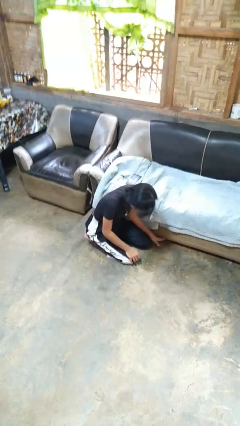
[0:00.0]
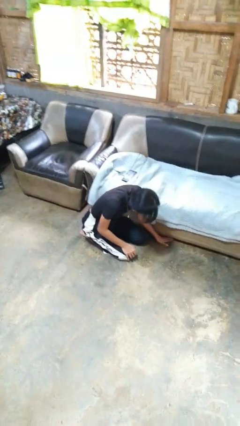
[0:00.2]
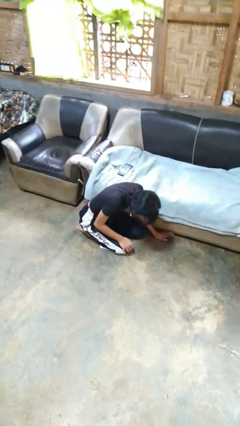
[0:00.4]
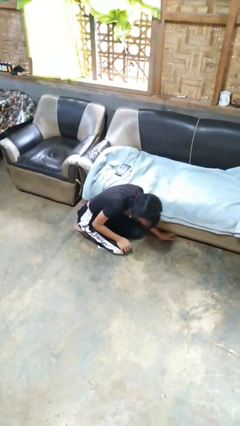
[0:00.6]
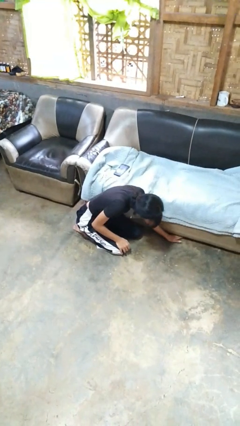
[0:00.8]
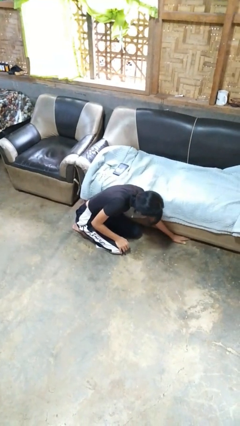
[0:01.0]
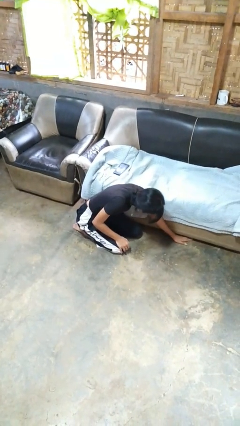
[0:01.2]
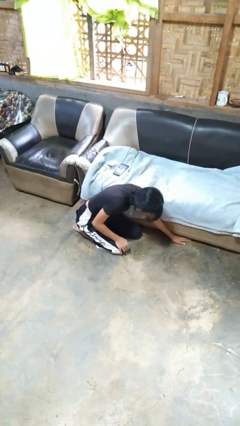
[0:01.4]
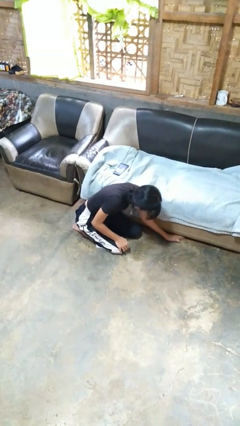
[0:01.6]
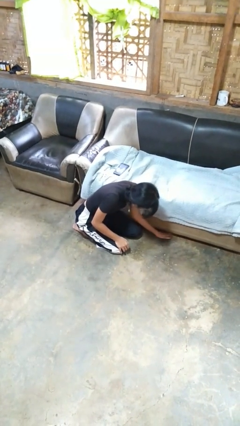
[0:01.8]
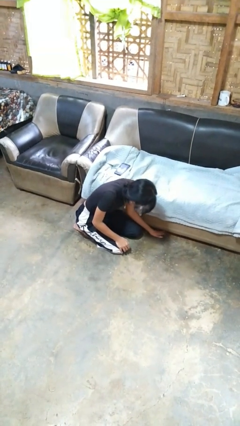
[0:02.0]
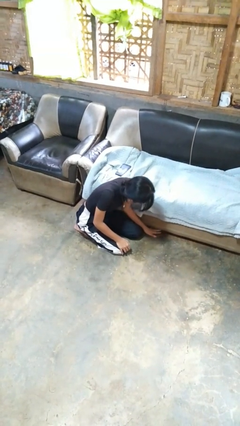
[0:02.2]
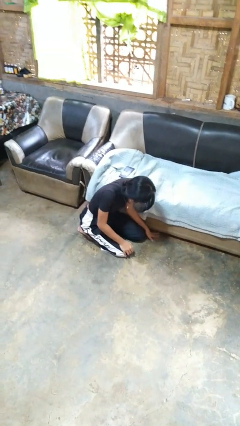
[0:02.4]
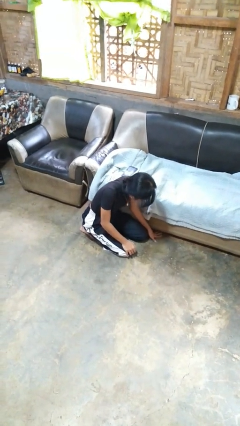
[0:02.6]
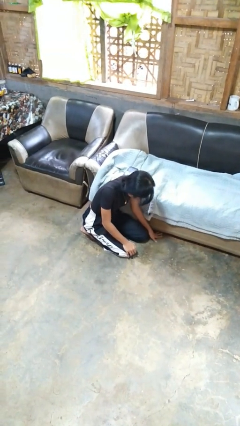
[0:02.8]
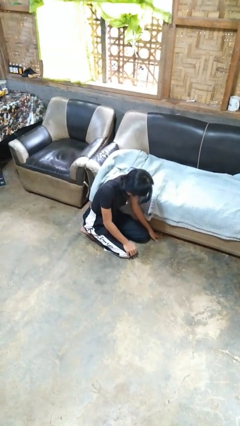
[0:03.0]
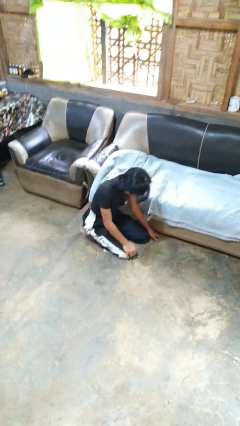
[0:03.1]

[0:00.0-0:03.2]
person searches under couch

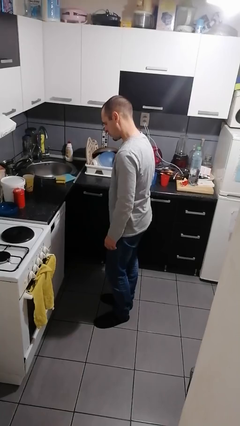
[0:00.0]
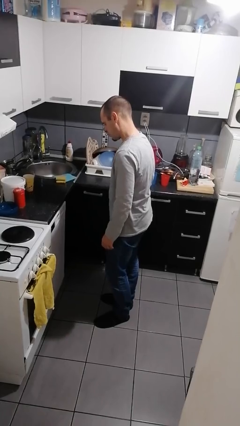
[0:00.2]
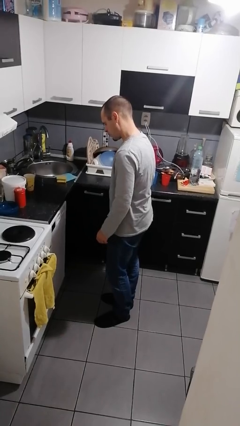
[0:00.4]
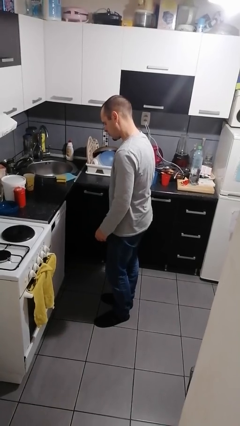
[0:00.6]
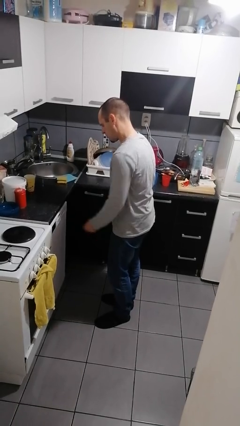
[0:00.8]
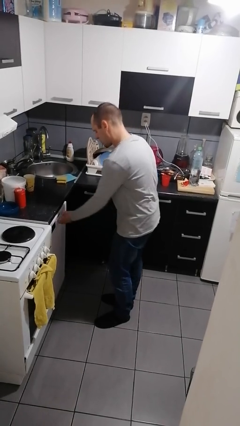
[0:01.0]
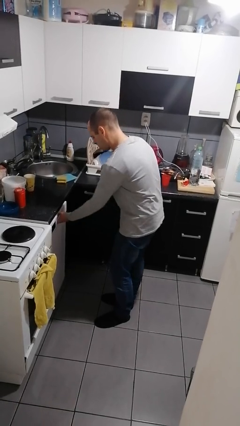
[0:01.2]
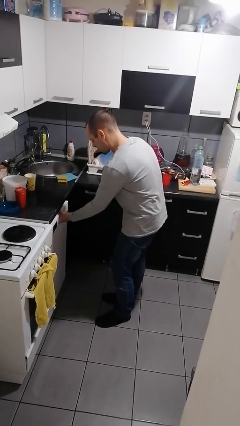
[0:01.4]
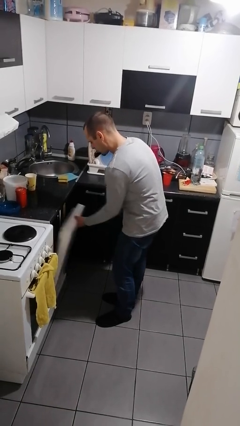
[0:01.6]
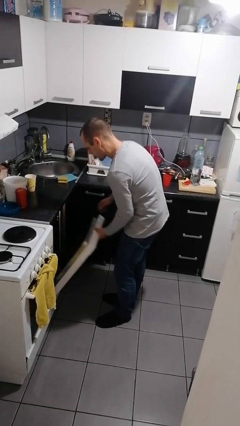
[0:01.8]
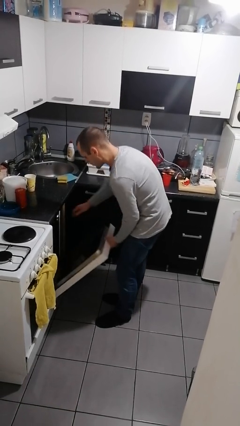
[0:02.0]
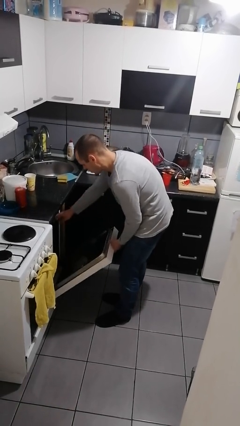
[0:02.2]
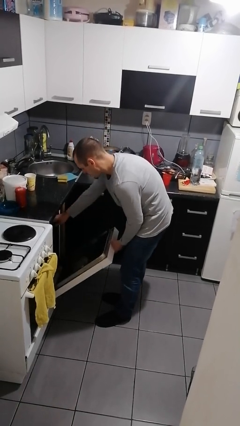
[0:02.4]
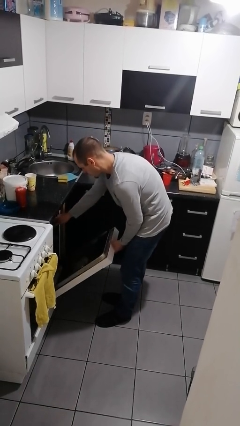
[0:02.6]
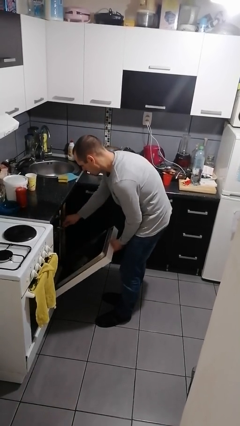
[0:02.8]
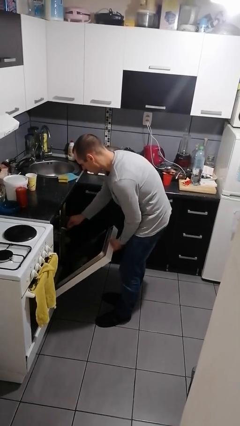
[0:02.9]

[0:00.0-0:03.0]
person opens dishwasher

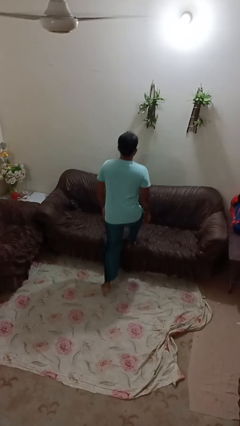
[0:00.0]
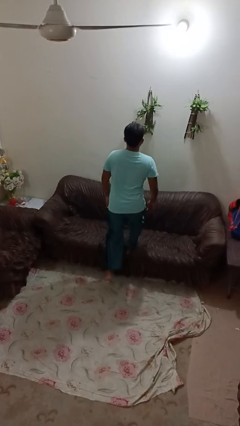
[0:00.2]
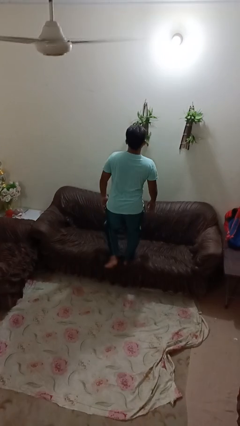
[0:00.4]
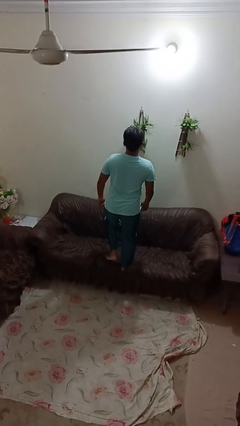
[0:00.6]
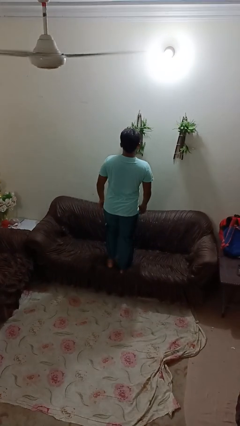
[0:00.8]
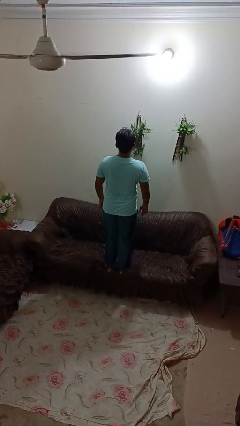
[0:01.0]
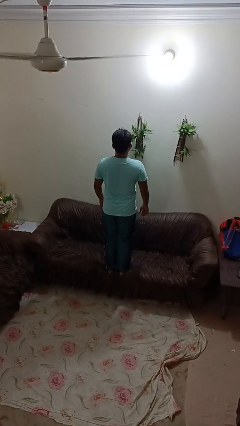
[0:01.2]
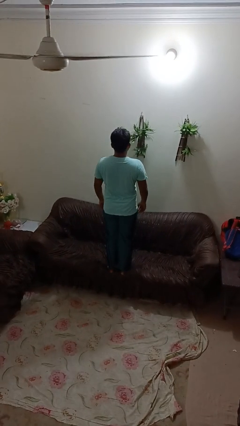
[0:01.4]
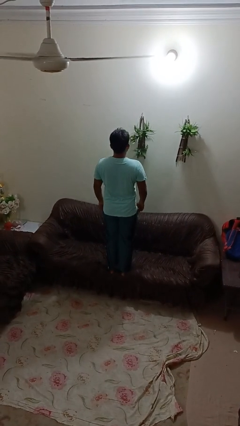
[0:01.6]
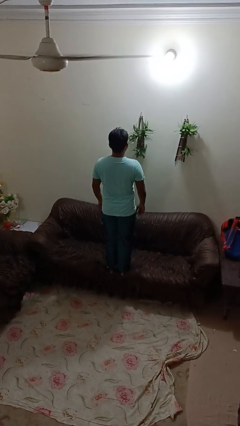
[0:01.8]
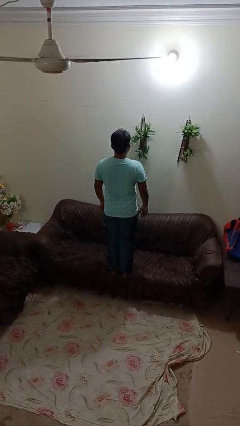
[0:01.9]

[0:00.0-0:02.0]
person climbs on couch

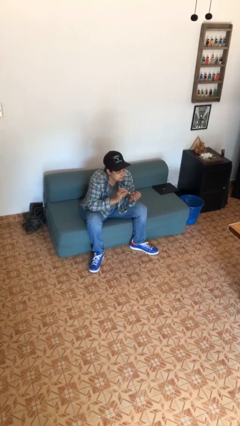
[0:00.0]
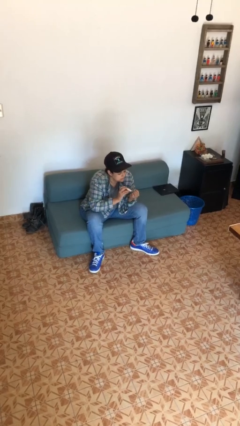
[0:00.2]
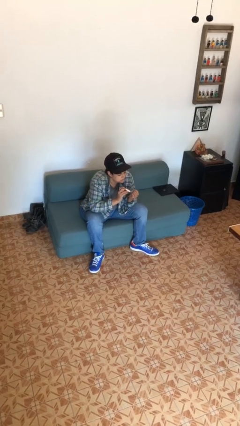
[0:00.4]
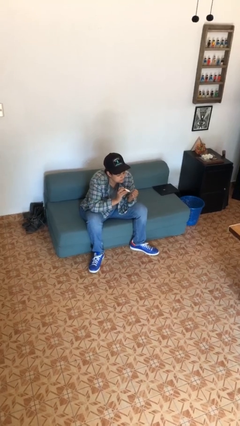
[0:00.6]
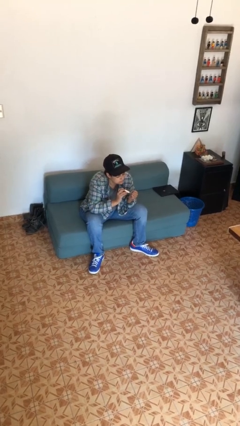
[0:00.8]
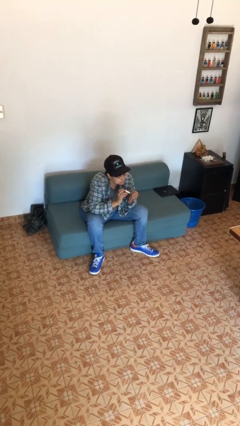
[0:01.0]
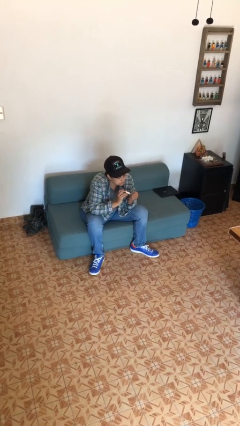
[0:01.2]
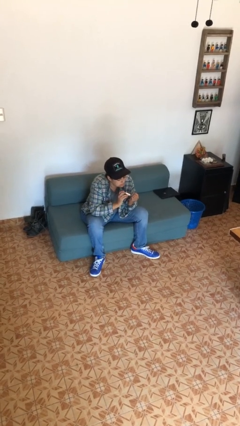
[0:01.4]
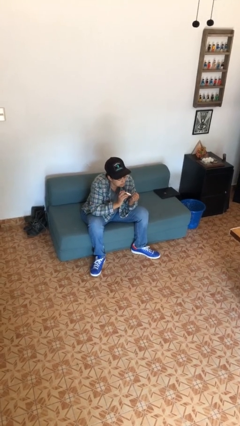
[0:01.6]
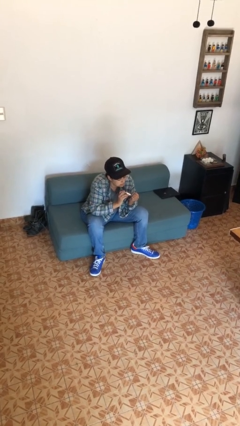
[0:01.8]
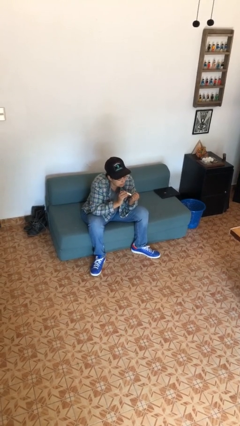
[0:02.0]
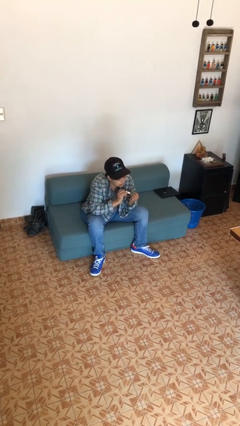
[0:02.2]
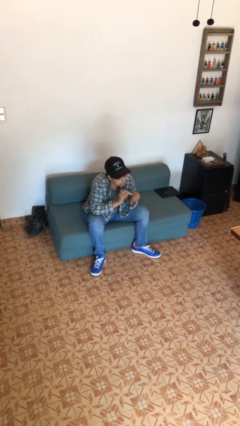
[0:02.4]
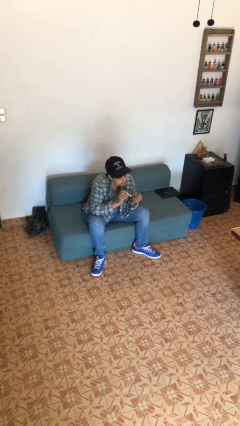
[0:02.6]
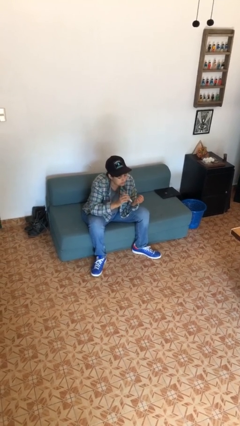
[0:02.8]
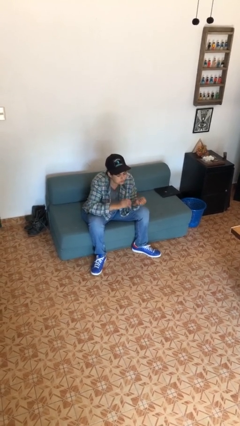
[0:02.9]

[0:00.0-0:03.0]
person clips fingernails

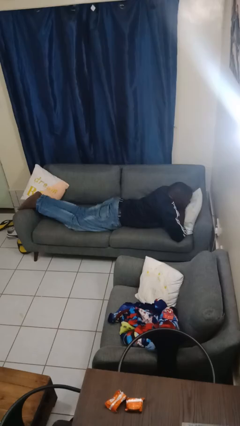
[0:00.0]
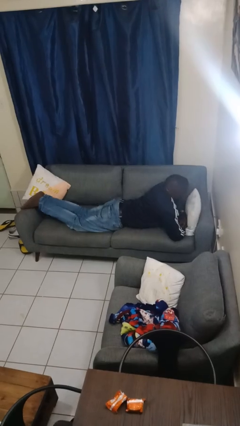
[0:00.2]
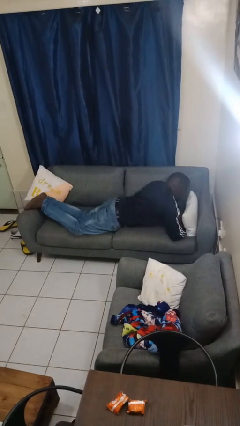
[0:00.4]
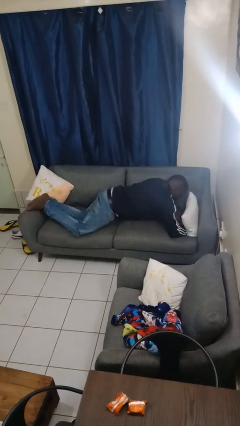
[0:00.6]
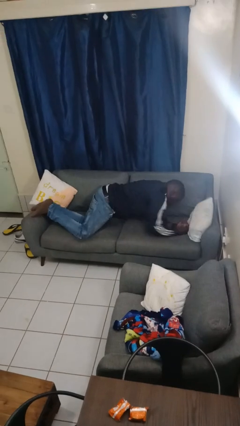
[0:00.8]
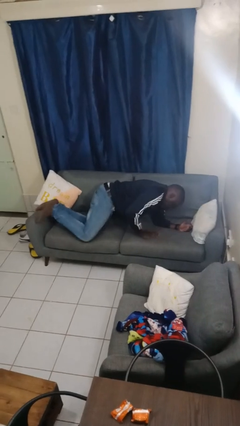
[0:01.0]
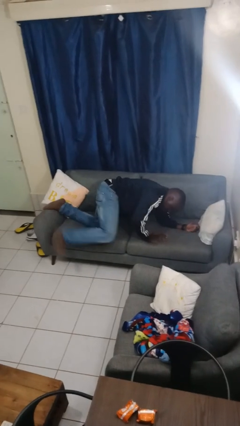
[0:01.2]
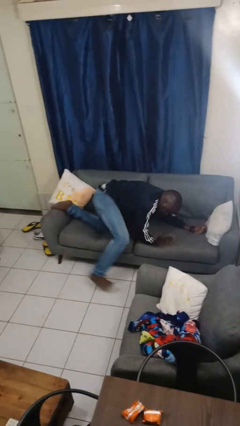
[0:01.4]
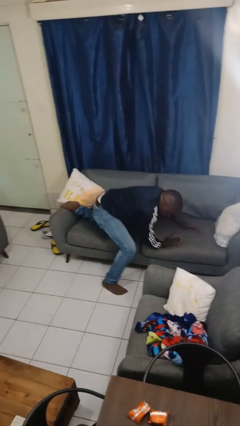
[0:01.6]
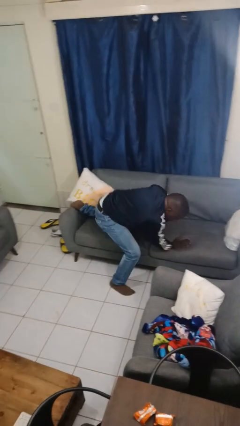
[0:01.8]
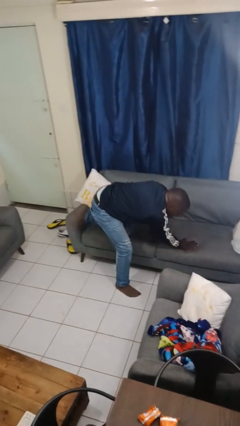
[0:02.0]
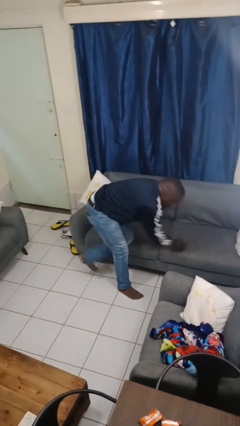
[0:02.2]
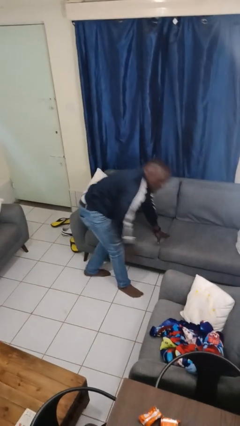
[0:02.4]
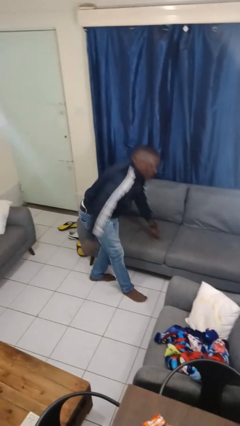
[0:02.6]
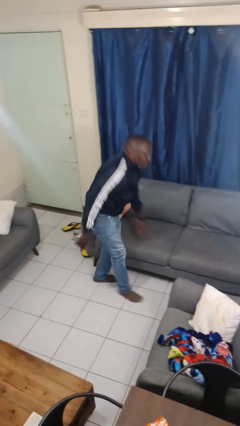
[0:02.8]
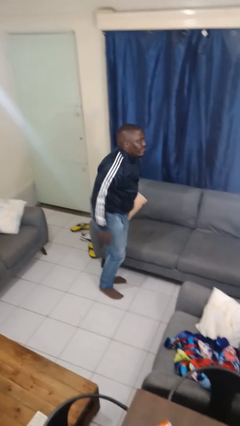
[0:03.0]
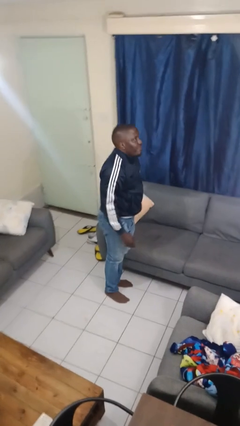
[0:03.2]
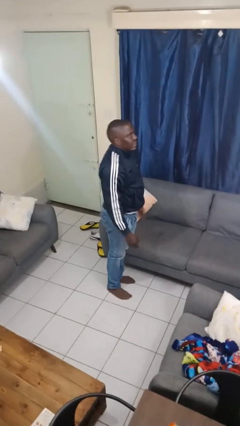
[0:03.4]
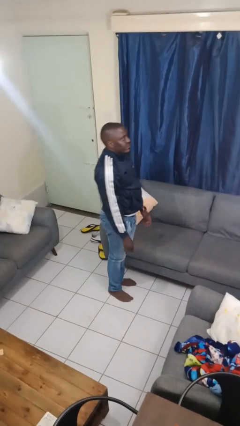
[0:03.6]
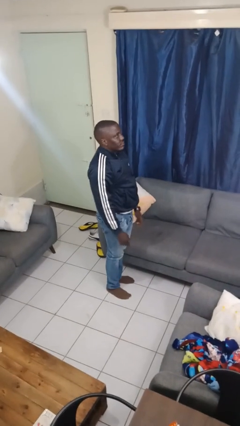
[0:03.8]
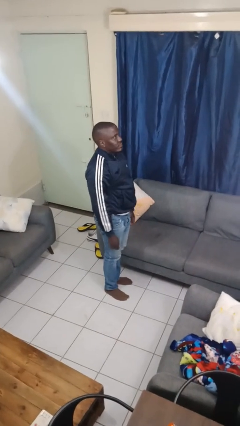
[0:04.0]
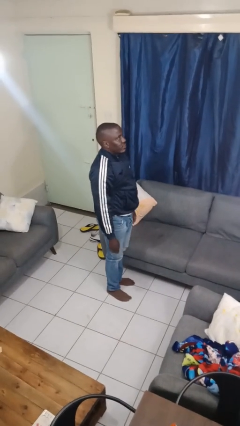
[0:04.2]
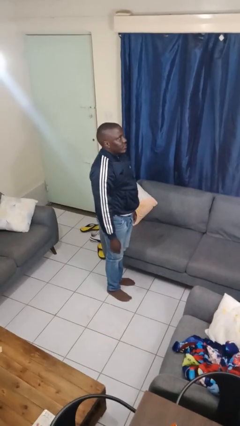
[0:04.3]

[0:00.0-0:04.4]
person stands up

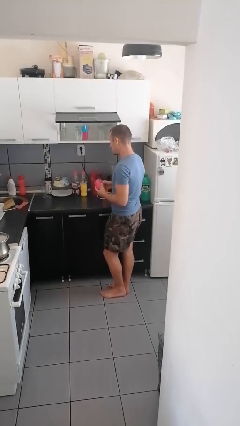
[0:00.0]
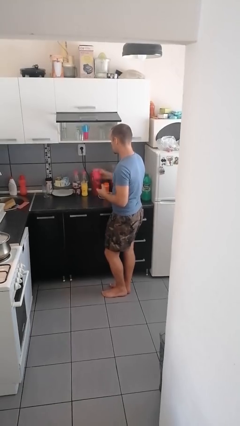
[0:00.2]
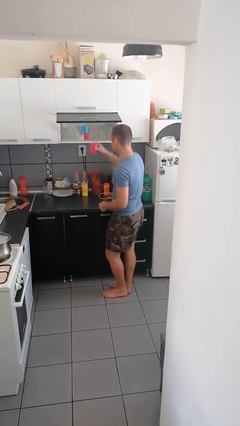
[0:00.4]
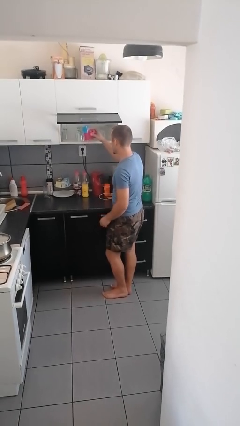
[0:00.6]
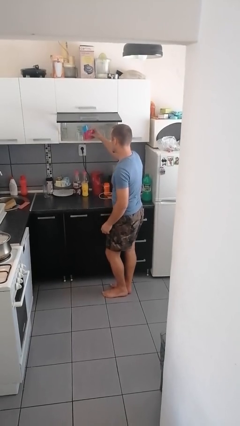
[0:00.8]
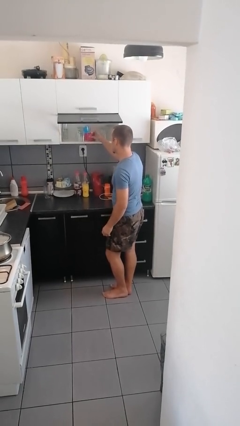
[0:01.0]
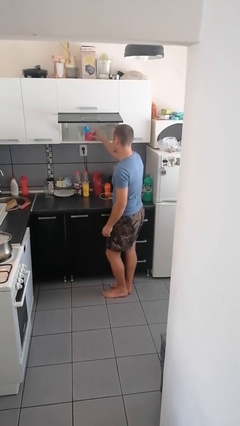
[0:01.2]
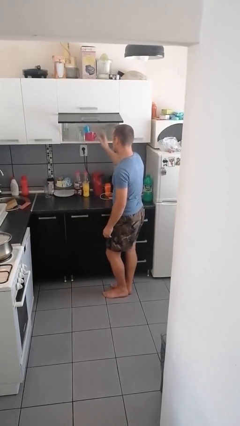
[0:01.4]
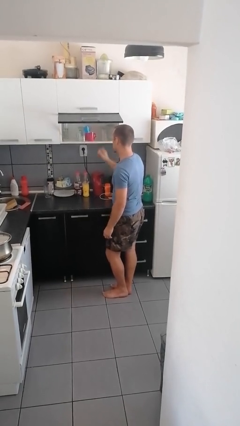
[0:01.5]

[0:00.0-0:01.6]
person puts down object into cabinet

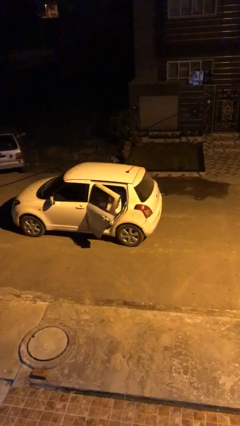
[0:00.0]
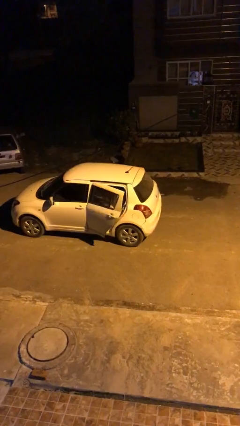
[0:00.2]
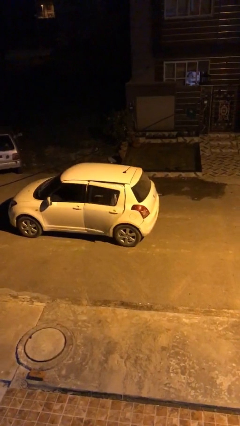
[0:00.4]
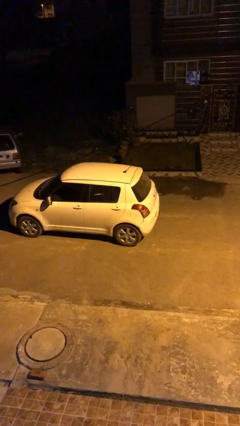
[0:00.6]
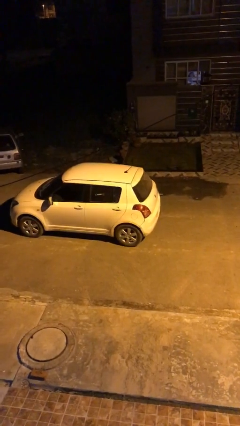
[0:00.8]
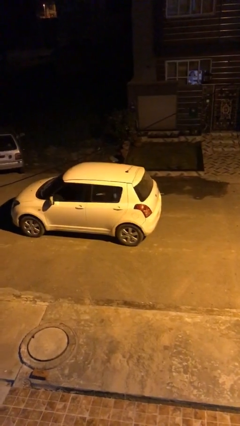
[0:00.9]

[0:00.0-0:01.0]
person closes car door
